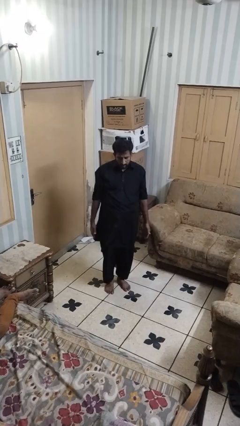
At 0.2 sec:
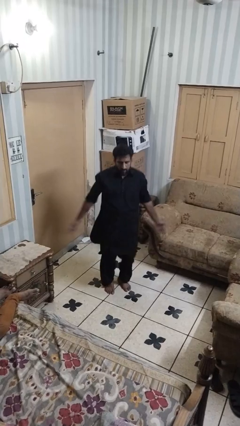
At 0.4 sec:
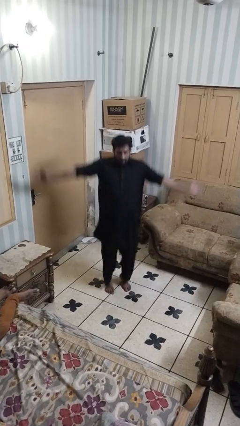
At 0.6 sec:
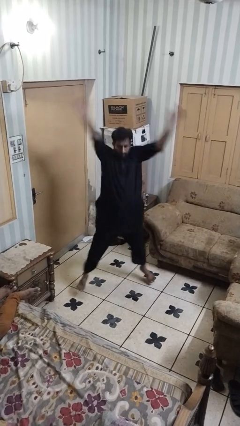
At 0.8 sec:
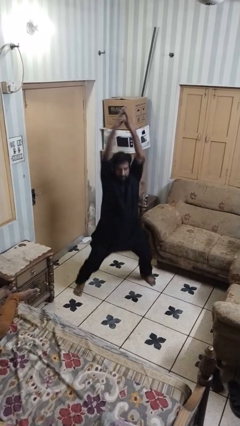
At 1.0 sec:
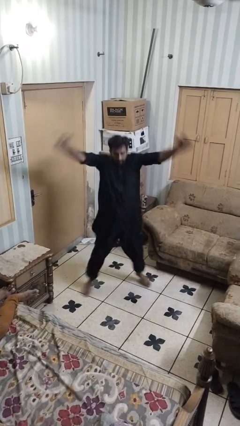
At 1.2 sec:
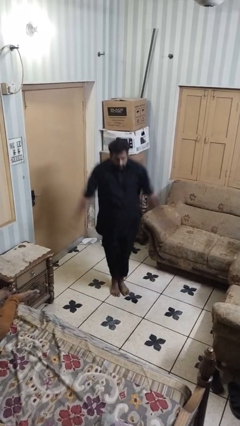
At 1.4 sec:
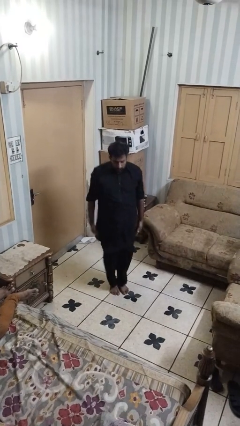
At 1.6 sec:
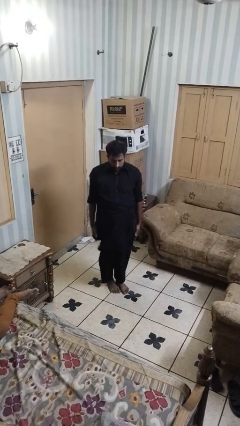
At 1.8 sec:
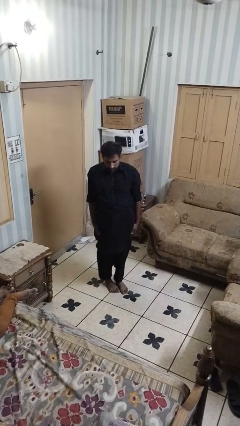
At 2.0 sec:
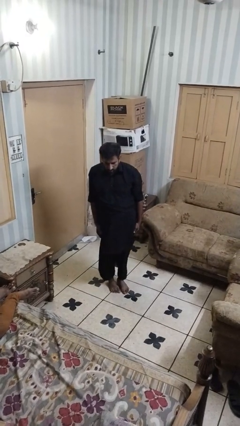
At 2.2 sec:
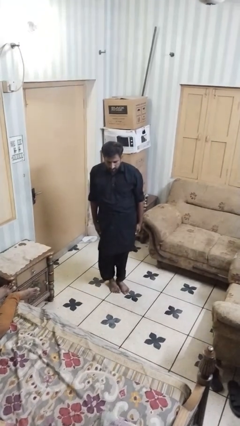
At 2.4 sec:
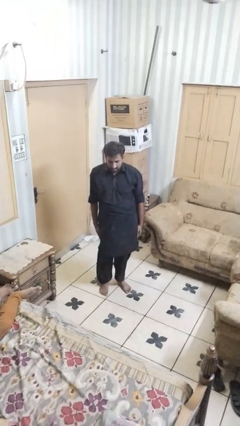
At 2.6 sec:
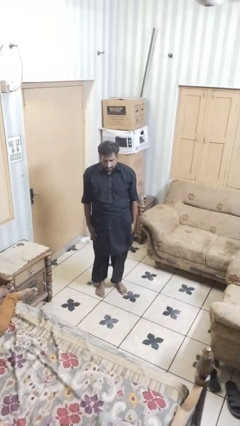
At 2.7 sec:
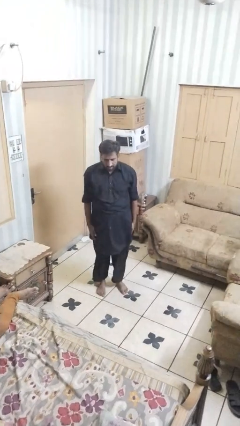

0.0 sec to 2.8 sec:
person exercises with jumping jacks

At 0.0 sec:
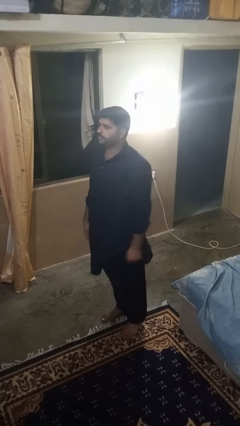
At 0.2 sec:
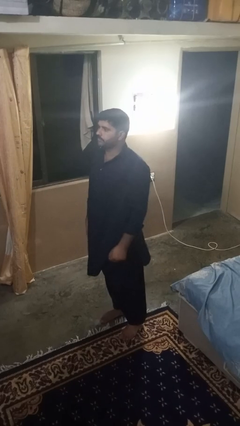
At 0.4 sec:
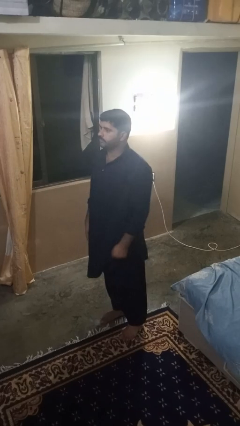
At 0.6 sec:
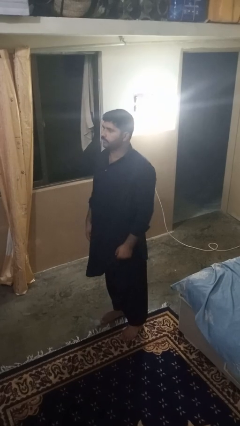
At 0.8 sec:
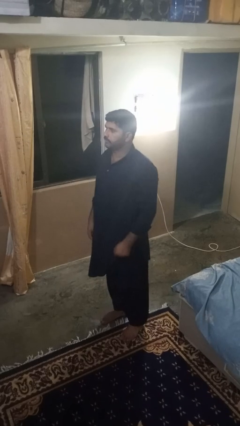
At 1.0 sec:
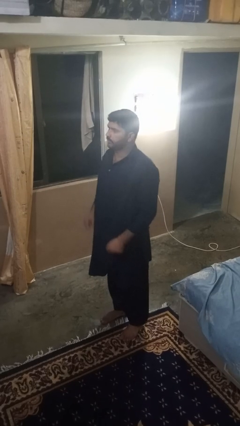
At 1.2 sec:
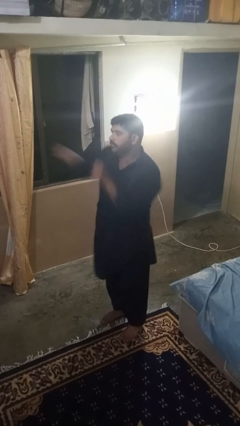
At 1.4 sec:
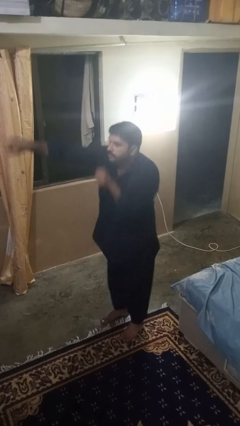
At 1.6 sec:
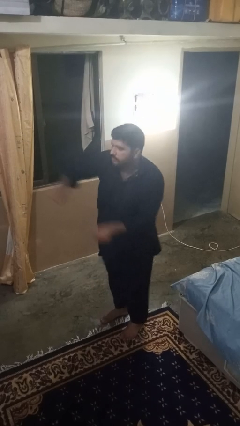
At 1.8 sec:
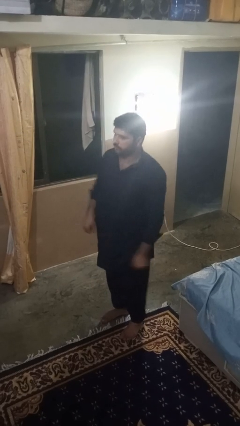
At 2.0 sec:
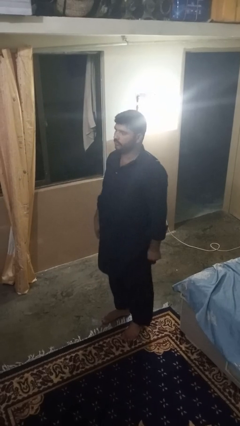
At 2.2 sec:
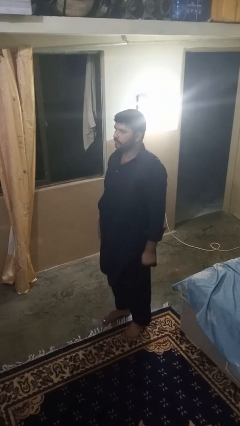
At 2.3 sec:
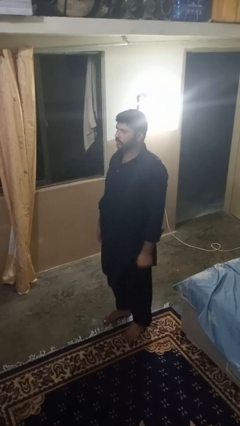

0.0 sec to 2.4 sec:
person karate chop

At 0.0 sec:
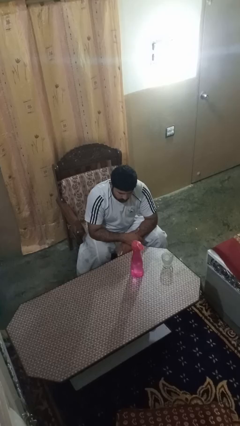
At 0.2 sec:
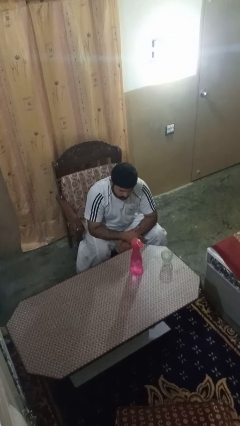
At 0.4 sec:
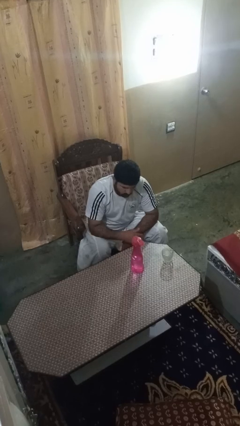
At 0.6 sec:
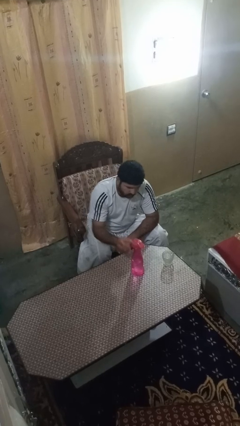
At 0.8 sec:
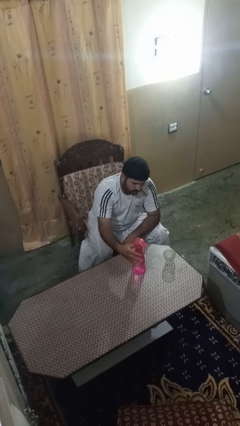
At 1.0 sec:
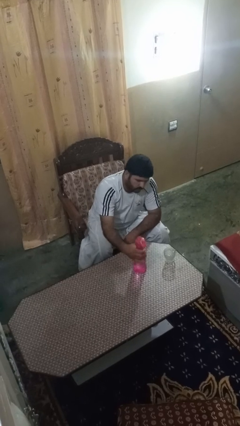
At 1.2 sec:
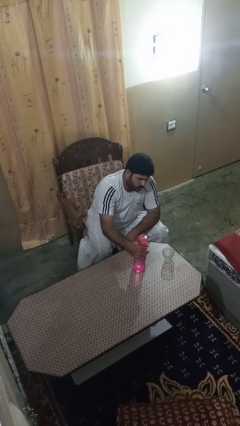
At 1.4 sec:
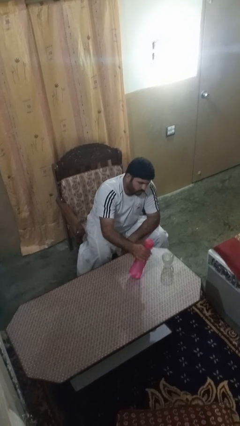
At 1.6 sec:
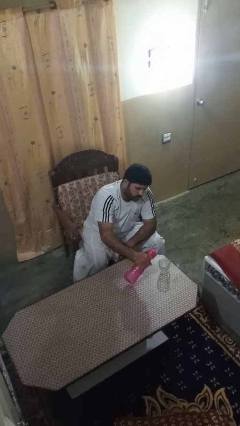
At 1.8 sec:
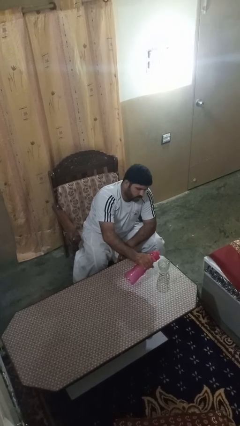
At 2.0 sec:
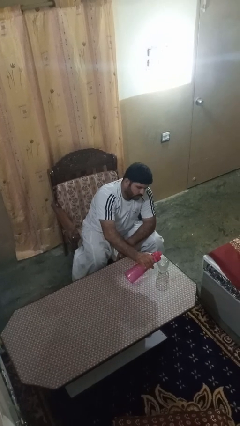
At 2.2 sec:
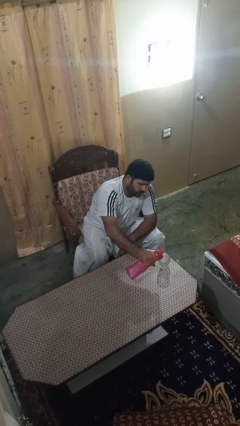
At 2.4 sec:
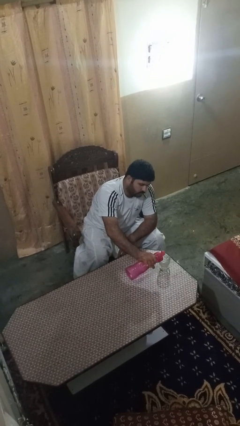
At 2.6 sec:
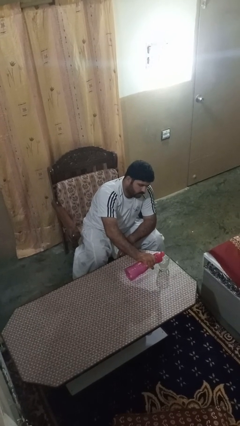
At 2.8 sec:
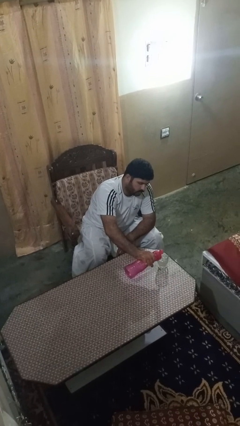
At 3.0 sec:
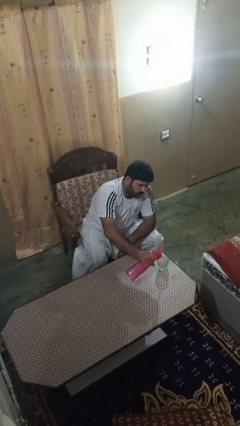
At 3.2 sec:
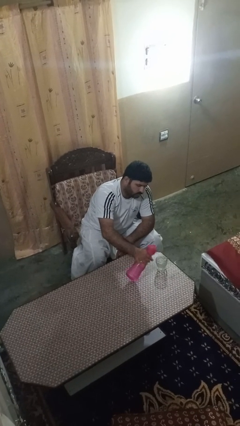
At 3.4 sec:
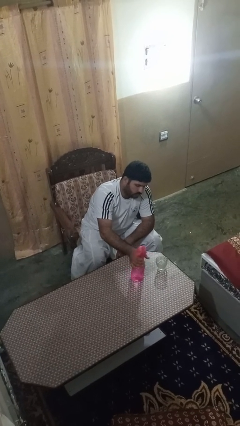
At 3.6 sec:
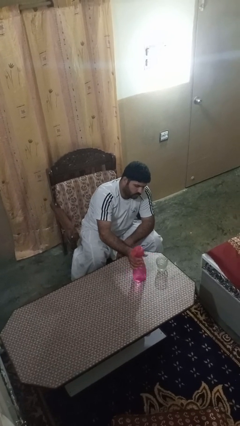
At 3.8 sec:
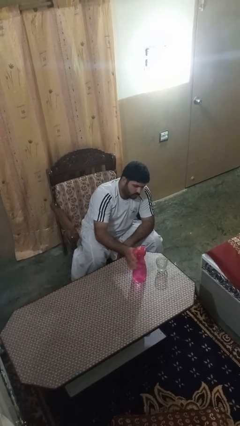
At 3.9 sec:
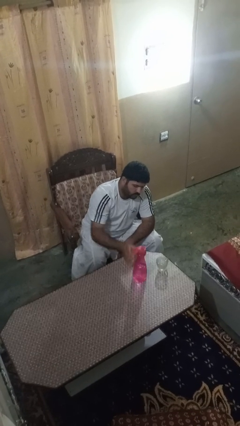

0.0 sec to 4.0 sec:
person pours liquid into cup

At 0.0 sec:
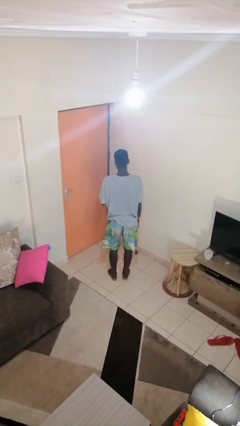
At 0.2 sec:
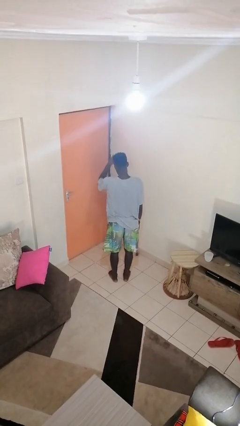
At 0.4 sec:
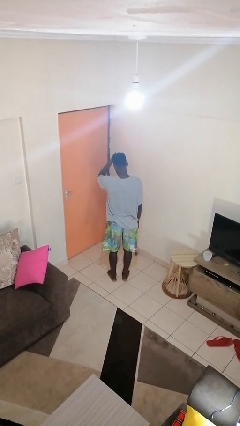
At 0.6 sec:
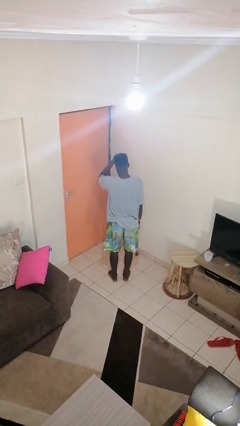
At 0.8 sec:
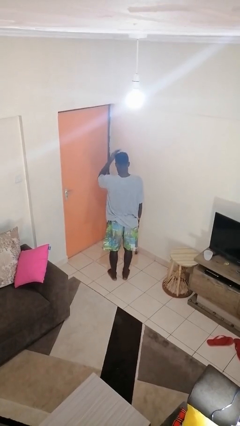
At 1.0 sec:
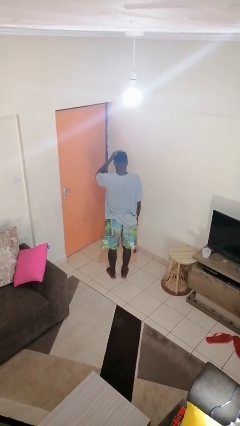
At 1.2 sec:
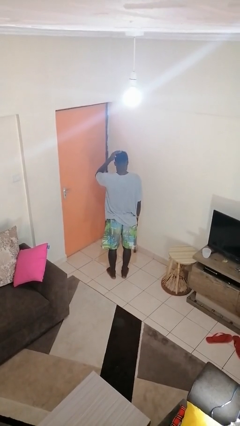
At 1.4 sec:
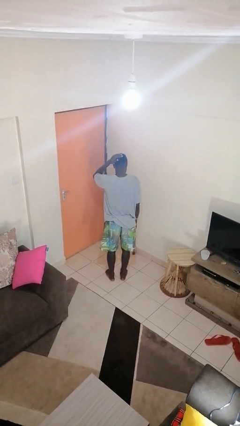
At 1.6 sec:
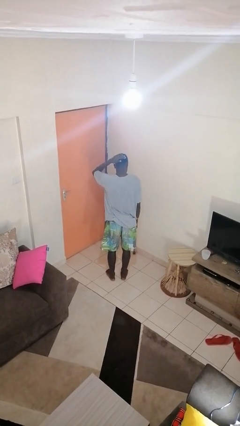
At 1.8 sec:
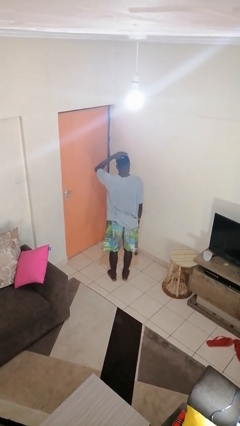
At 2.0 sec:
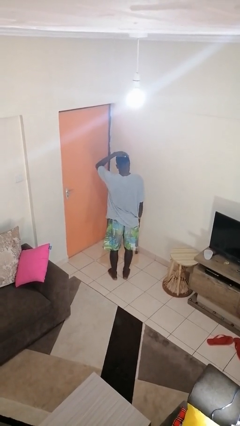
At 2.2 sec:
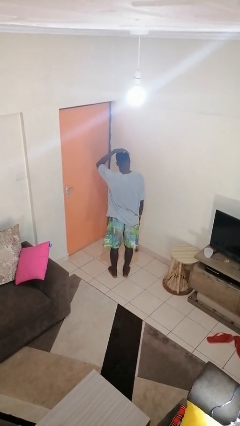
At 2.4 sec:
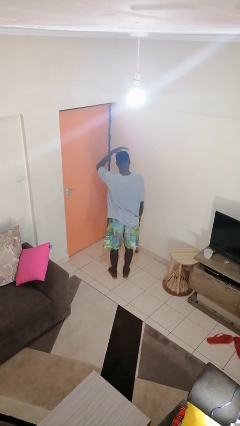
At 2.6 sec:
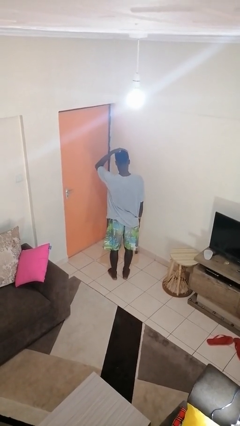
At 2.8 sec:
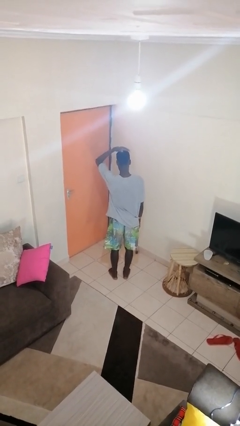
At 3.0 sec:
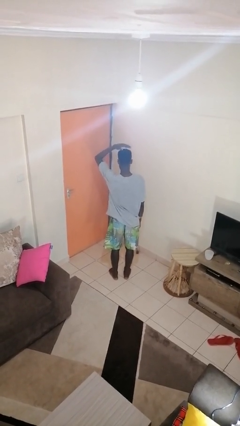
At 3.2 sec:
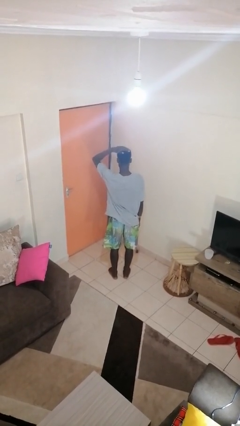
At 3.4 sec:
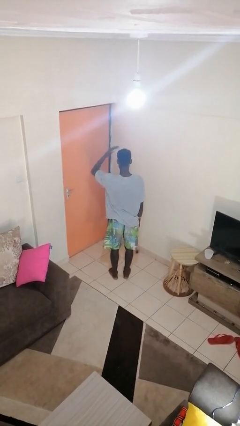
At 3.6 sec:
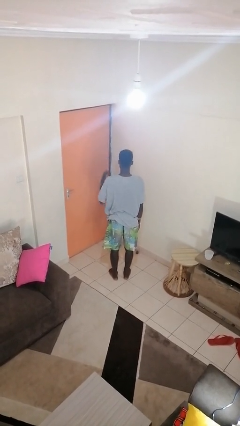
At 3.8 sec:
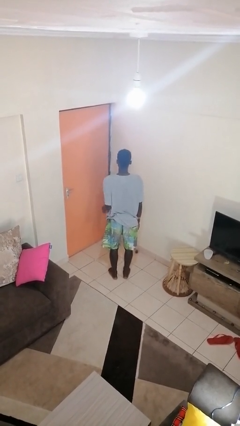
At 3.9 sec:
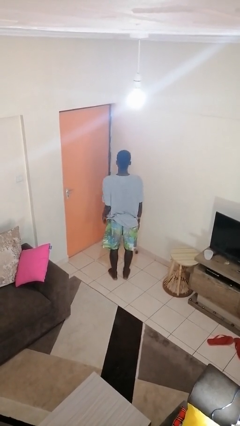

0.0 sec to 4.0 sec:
person pats head

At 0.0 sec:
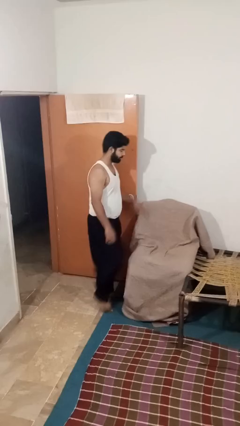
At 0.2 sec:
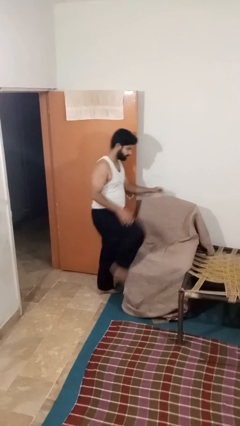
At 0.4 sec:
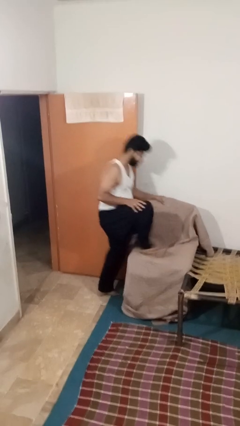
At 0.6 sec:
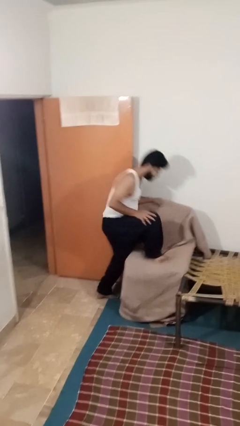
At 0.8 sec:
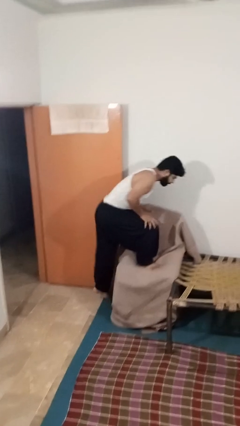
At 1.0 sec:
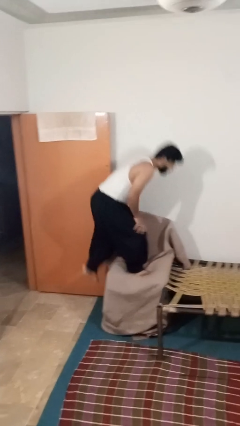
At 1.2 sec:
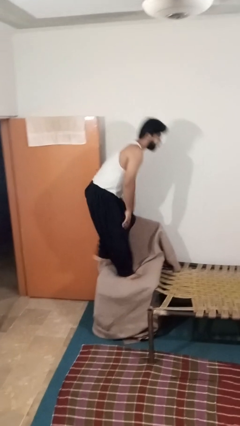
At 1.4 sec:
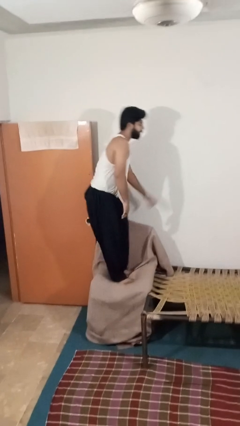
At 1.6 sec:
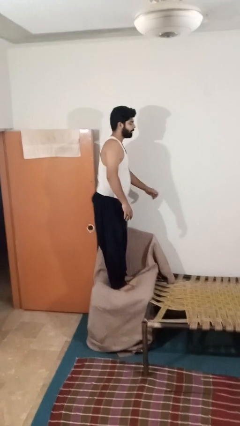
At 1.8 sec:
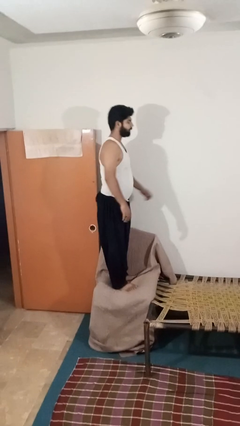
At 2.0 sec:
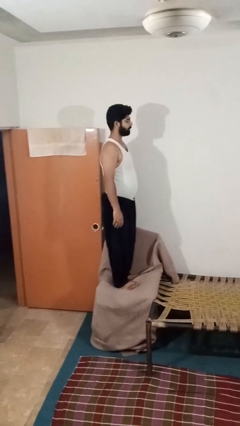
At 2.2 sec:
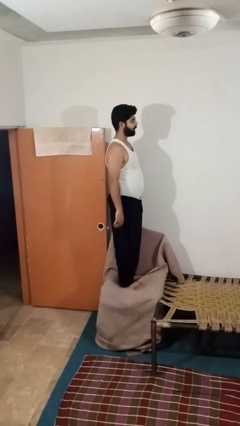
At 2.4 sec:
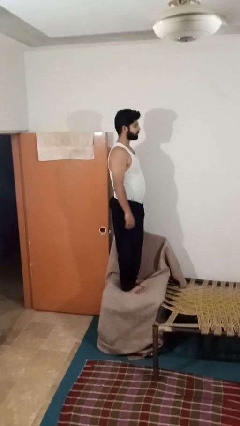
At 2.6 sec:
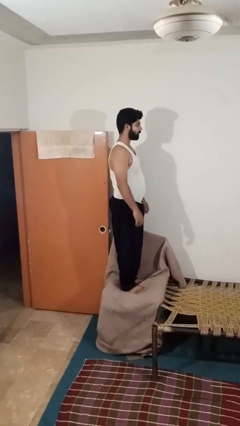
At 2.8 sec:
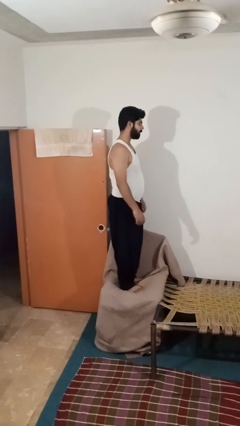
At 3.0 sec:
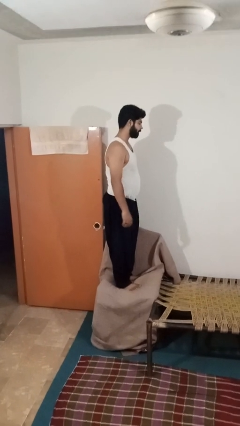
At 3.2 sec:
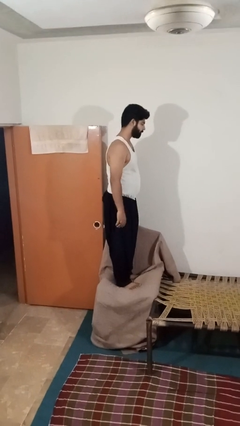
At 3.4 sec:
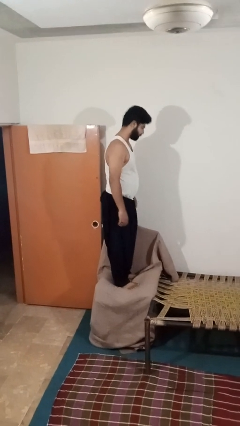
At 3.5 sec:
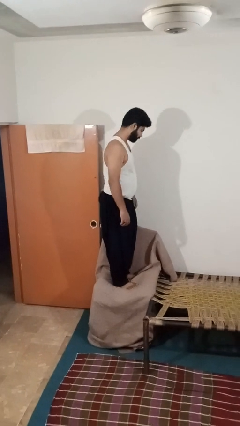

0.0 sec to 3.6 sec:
person climbs on couch

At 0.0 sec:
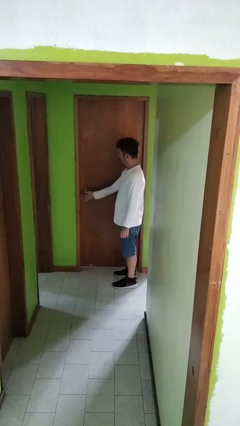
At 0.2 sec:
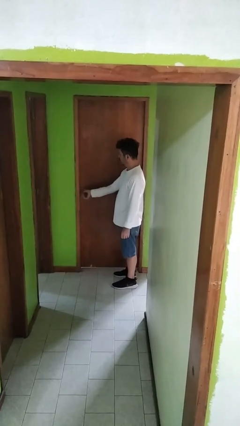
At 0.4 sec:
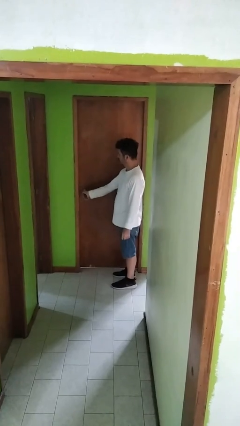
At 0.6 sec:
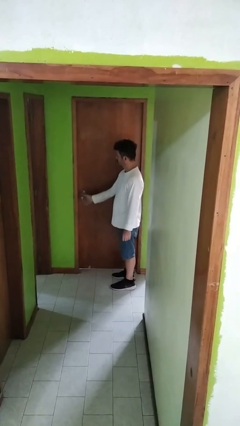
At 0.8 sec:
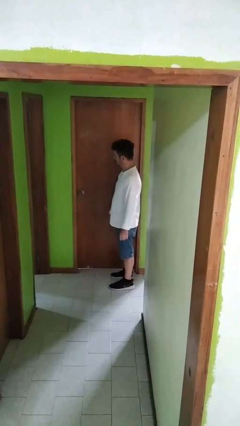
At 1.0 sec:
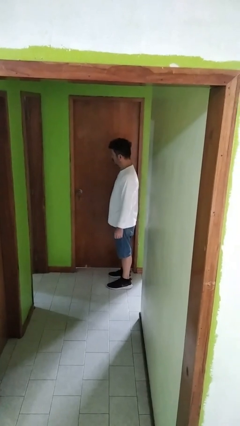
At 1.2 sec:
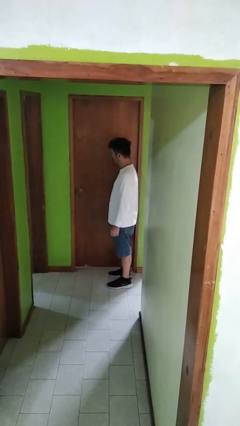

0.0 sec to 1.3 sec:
person locks door with keys
